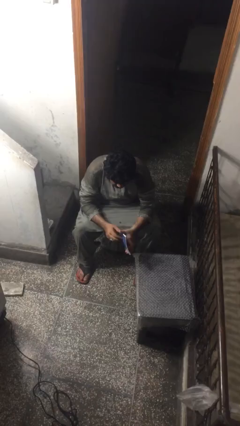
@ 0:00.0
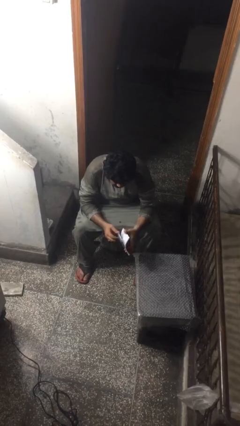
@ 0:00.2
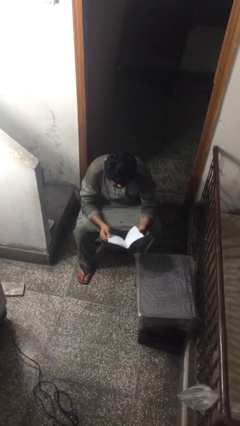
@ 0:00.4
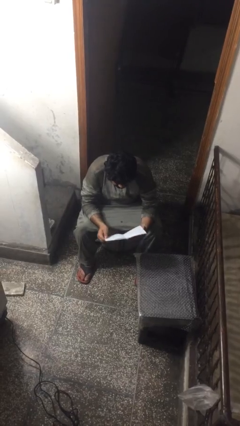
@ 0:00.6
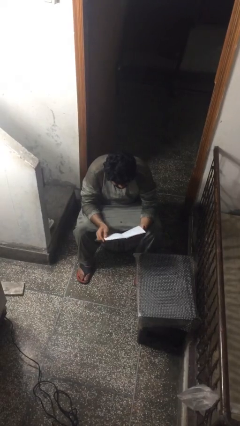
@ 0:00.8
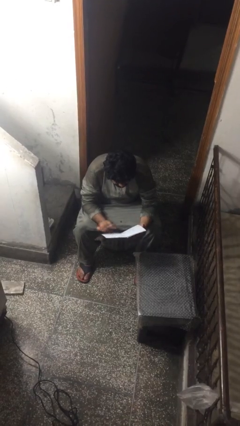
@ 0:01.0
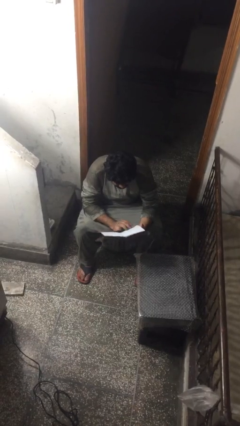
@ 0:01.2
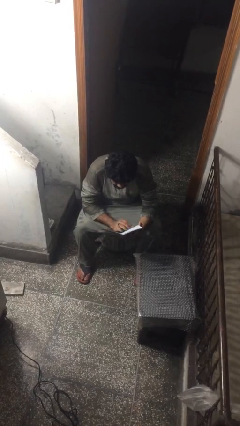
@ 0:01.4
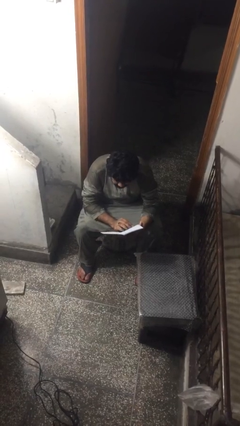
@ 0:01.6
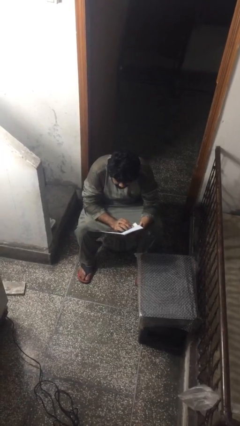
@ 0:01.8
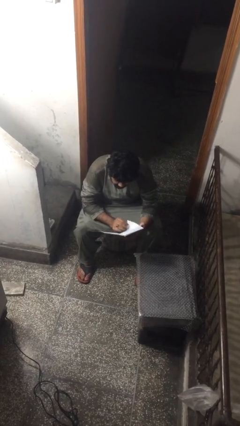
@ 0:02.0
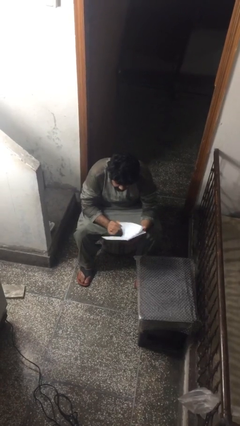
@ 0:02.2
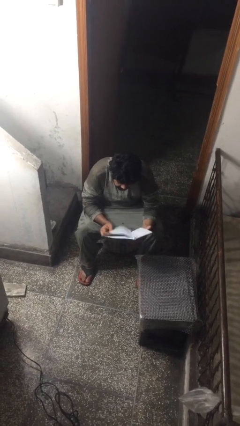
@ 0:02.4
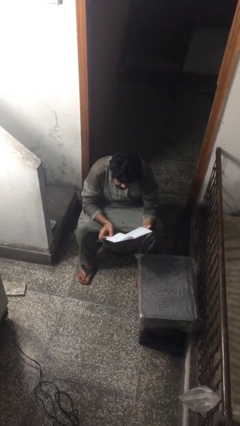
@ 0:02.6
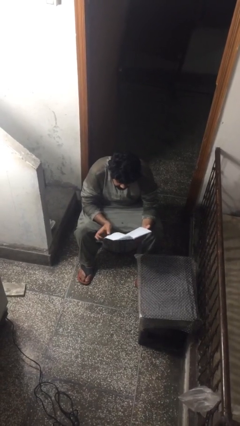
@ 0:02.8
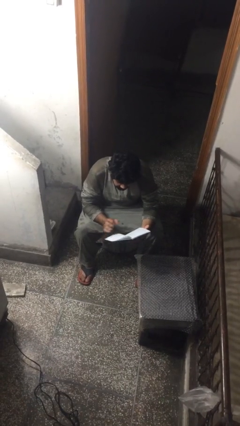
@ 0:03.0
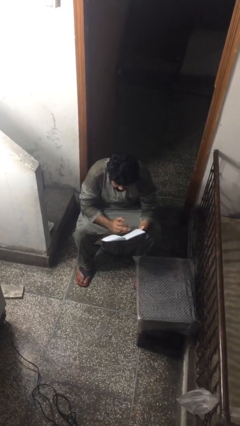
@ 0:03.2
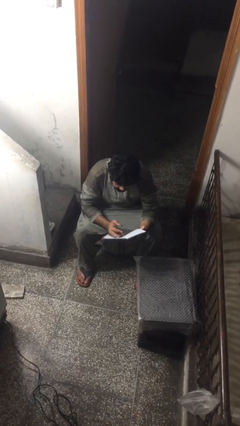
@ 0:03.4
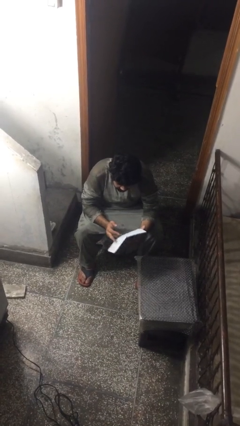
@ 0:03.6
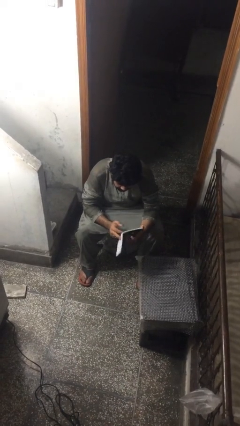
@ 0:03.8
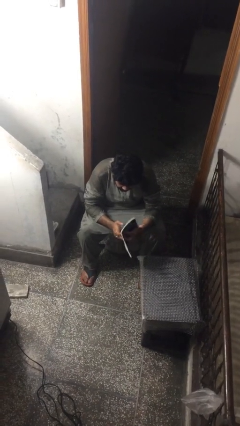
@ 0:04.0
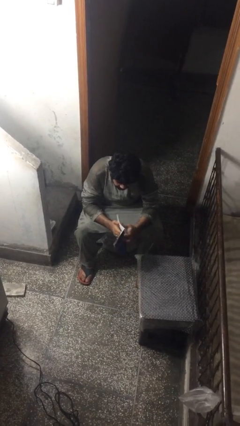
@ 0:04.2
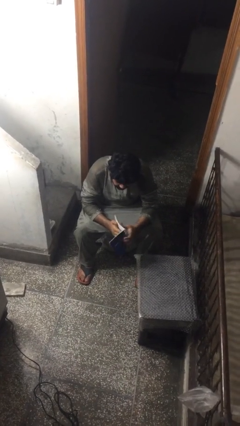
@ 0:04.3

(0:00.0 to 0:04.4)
person reads document

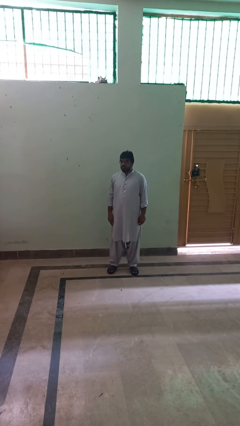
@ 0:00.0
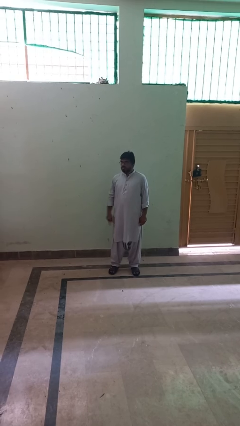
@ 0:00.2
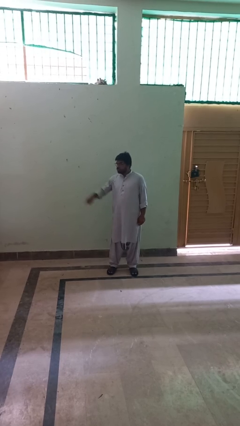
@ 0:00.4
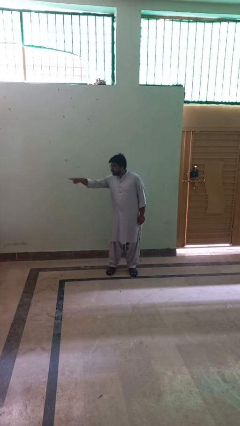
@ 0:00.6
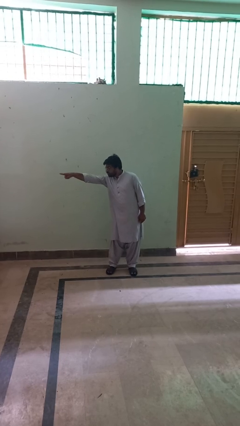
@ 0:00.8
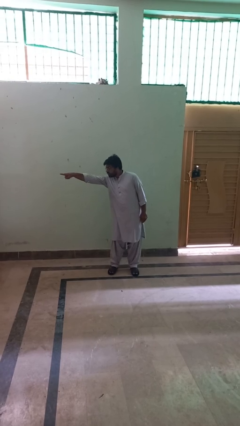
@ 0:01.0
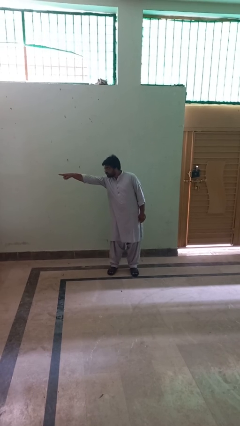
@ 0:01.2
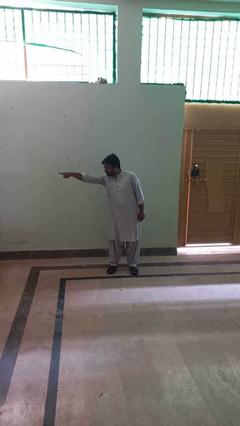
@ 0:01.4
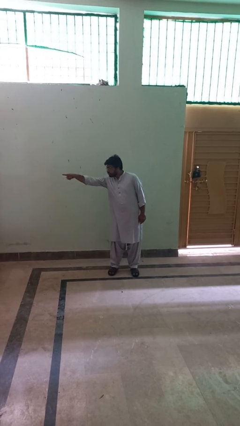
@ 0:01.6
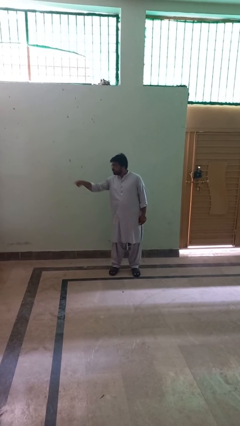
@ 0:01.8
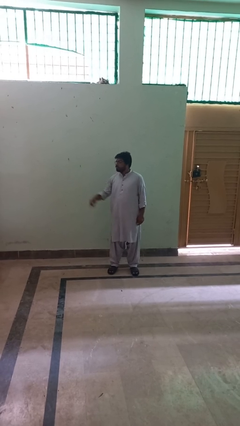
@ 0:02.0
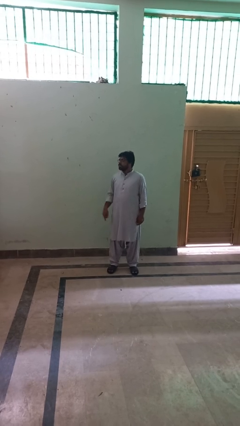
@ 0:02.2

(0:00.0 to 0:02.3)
person points at person

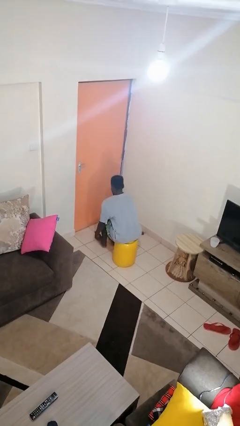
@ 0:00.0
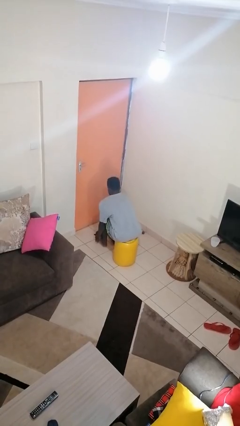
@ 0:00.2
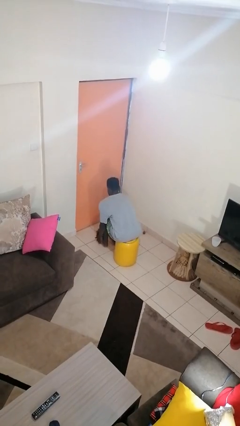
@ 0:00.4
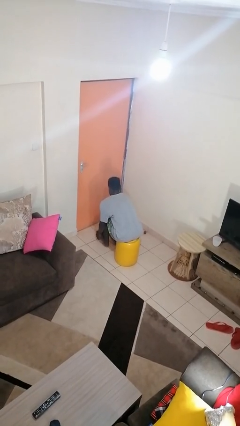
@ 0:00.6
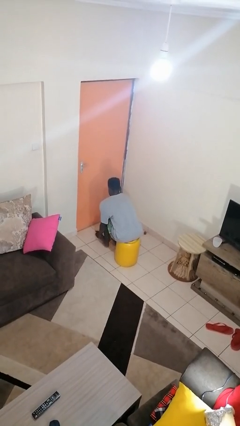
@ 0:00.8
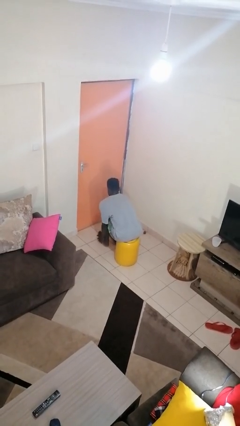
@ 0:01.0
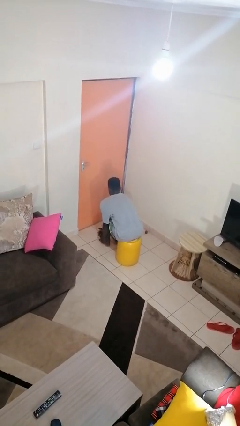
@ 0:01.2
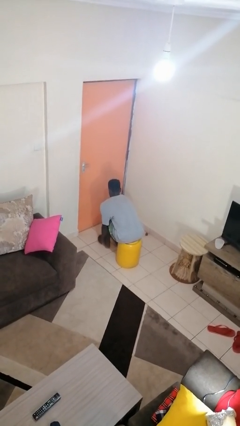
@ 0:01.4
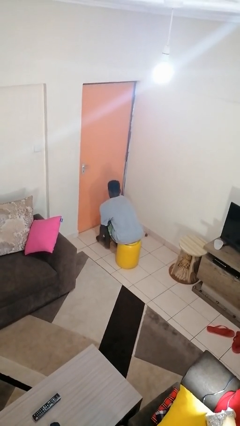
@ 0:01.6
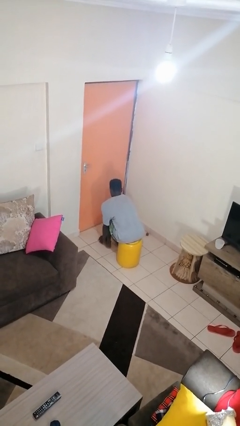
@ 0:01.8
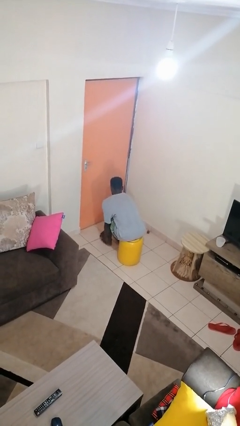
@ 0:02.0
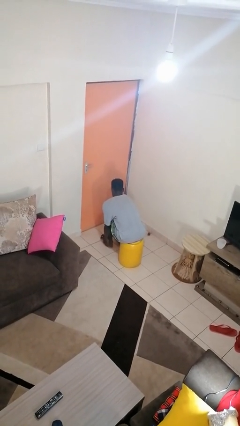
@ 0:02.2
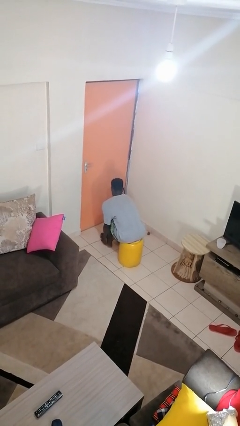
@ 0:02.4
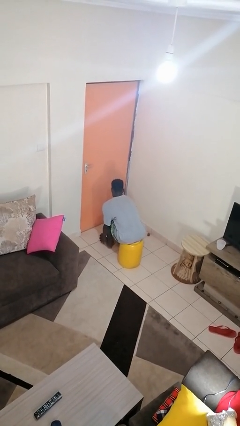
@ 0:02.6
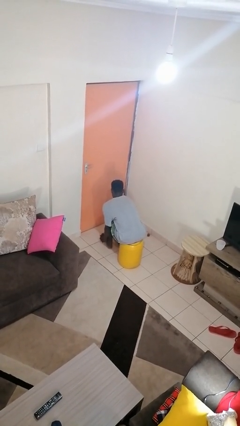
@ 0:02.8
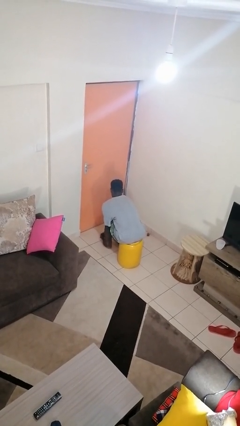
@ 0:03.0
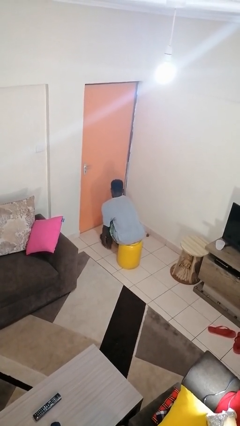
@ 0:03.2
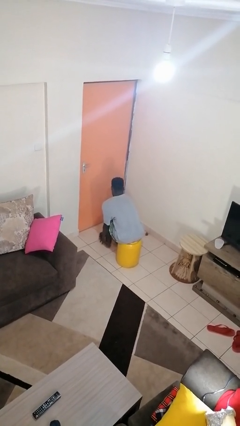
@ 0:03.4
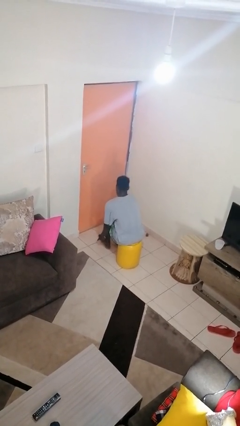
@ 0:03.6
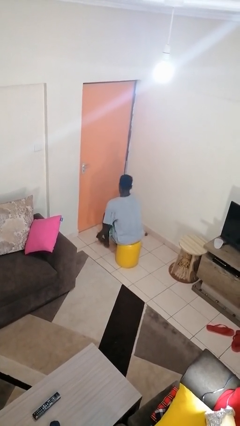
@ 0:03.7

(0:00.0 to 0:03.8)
person rubs foot

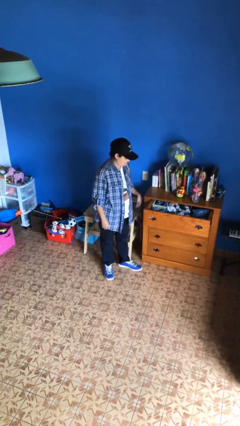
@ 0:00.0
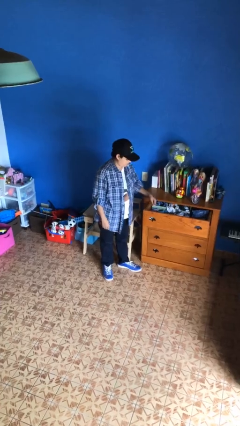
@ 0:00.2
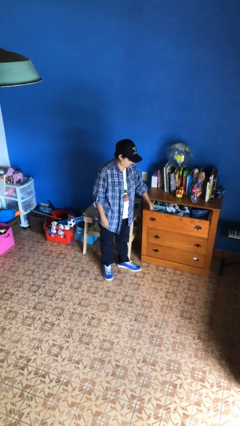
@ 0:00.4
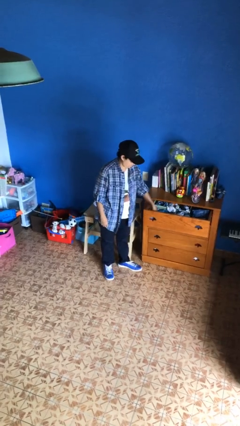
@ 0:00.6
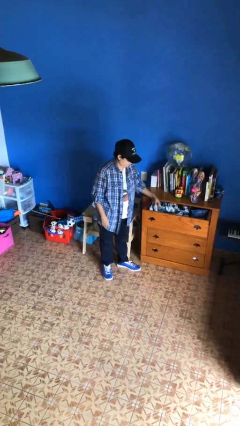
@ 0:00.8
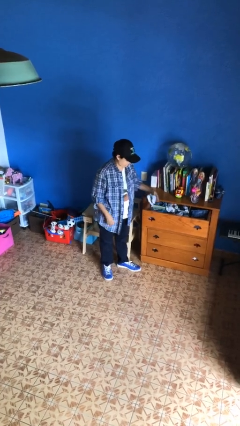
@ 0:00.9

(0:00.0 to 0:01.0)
person takes clothes from dresser

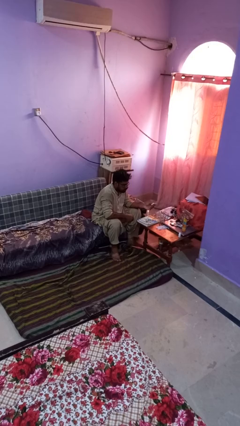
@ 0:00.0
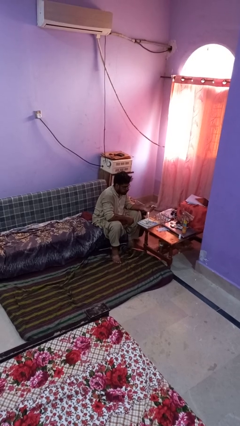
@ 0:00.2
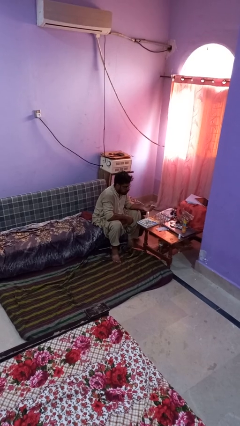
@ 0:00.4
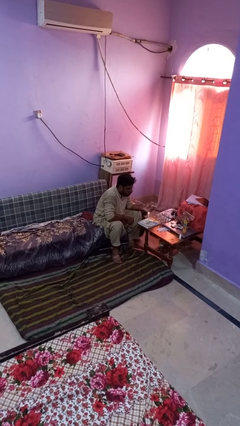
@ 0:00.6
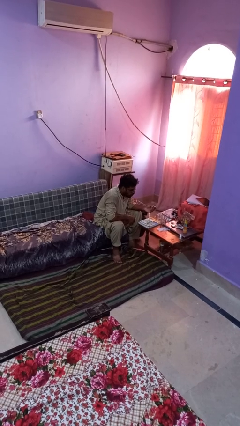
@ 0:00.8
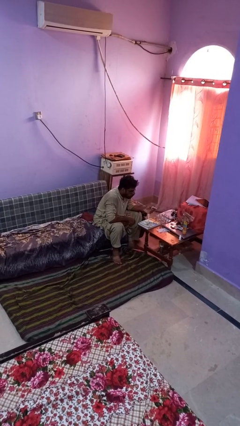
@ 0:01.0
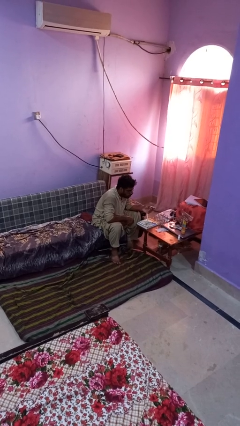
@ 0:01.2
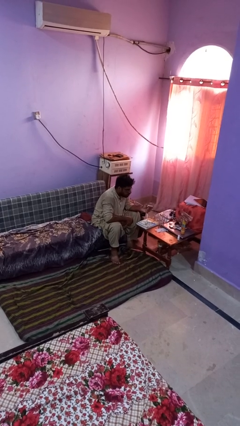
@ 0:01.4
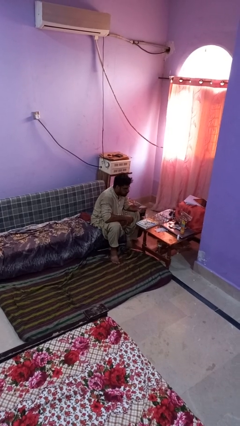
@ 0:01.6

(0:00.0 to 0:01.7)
person extinguishes candle

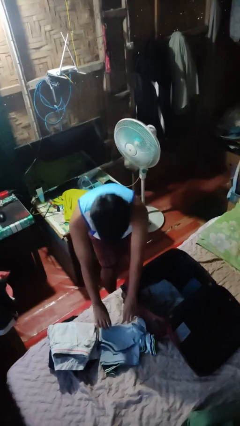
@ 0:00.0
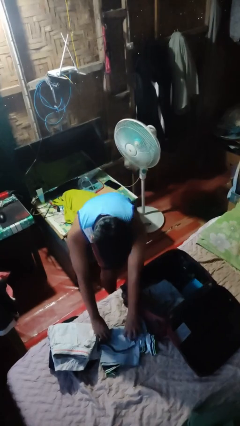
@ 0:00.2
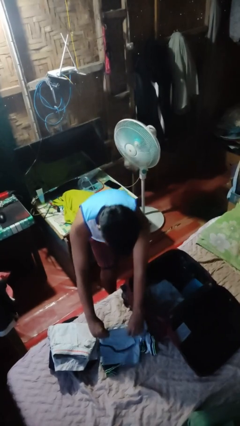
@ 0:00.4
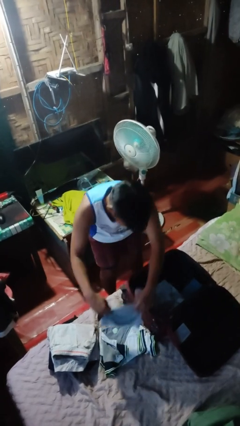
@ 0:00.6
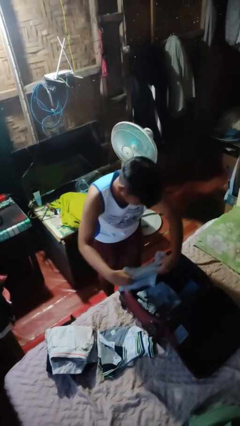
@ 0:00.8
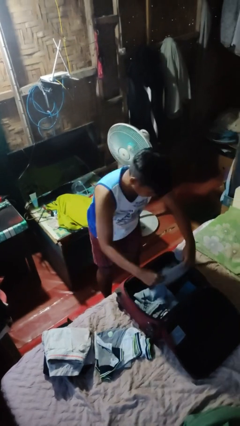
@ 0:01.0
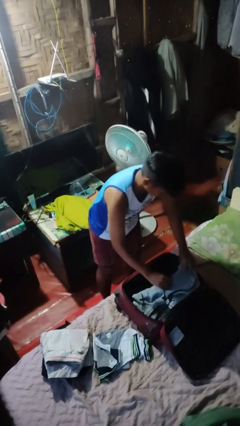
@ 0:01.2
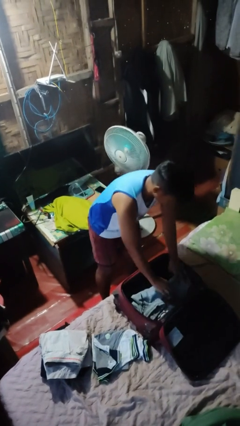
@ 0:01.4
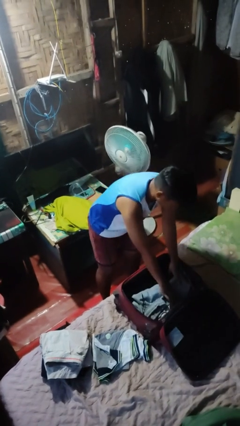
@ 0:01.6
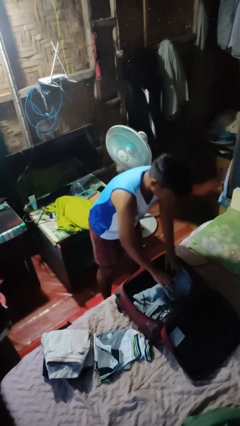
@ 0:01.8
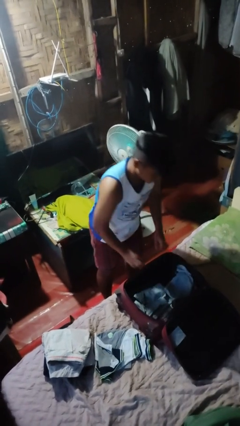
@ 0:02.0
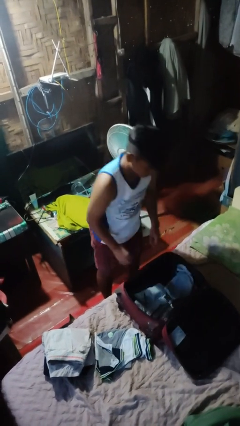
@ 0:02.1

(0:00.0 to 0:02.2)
person loads clothes into suitcase

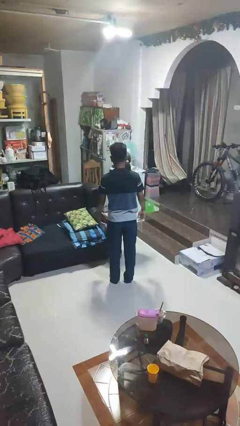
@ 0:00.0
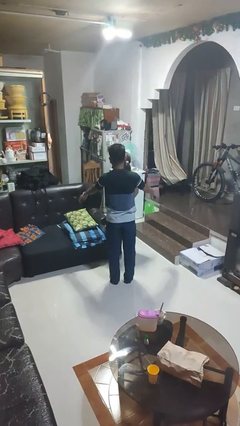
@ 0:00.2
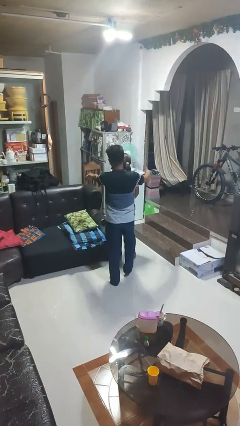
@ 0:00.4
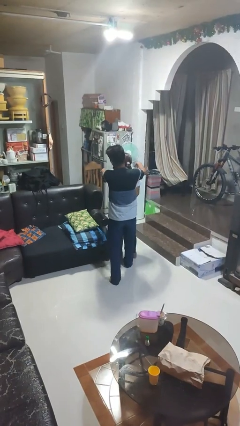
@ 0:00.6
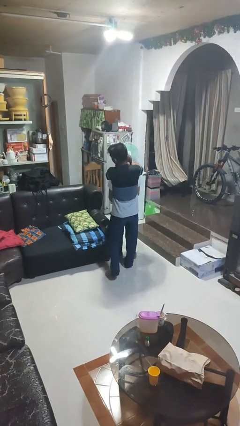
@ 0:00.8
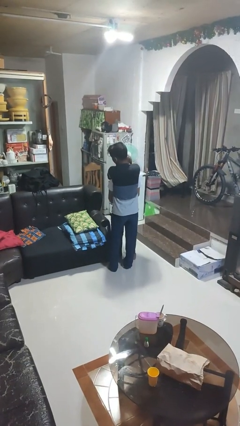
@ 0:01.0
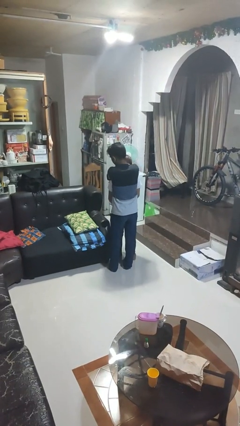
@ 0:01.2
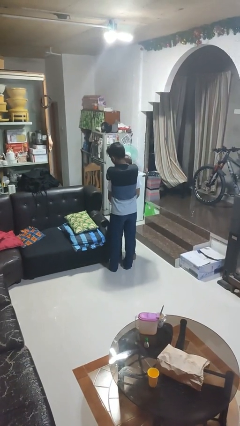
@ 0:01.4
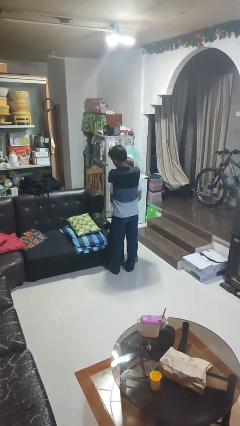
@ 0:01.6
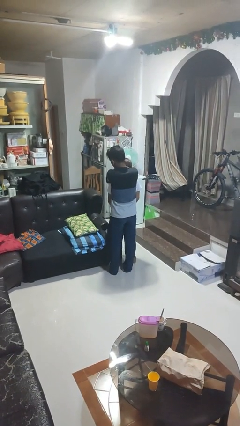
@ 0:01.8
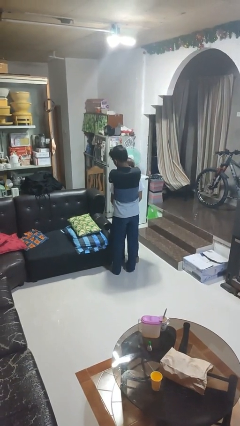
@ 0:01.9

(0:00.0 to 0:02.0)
person hugs person from behind
